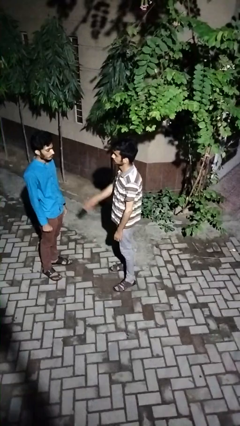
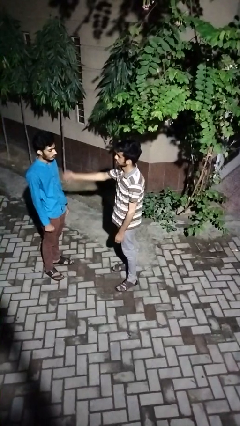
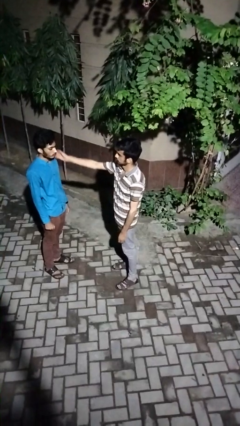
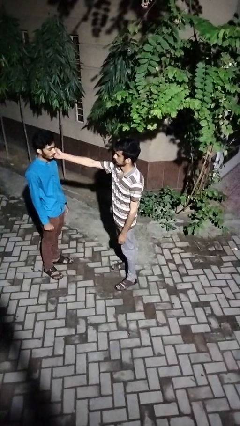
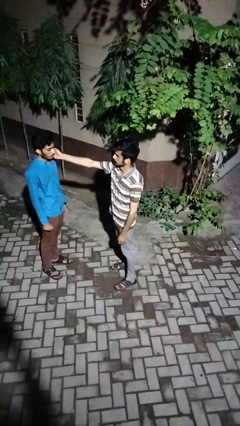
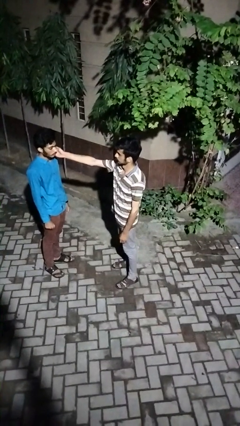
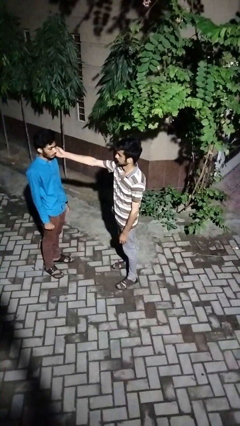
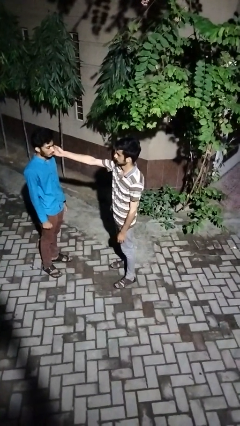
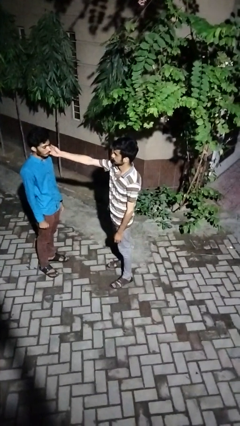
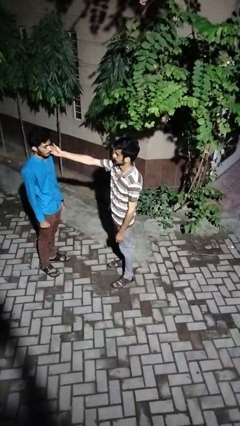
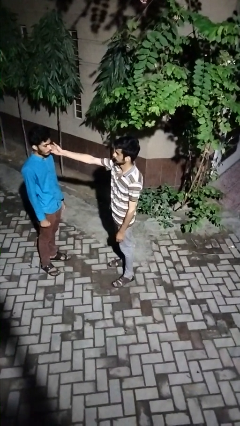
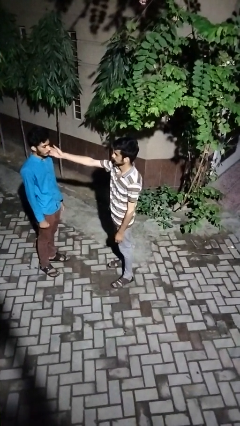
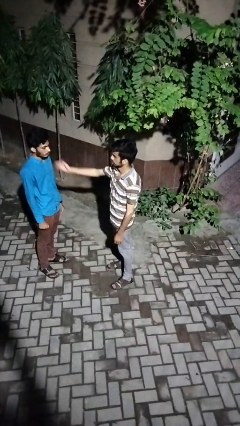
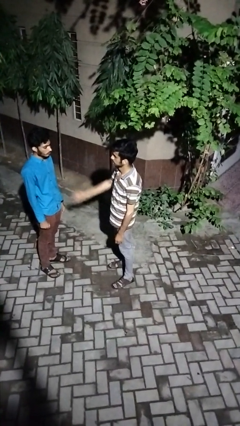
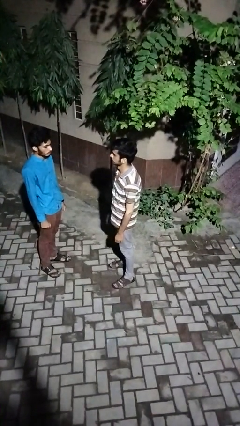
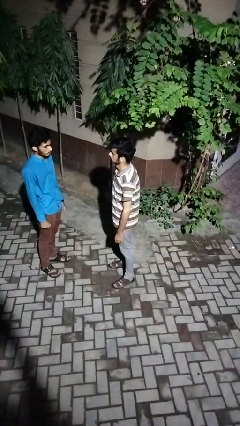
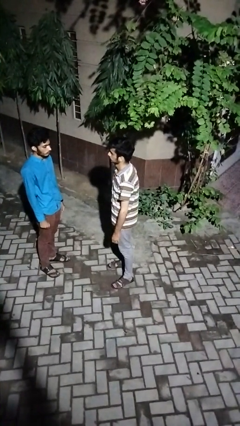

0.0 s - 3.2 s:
person touches face of person

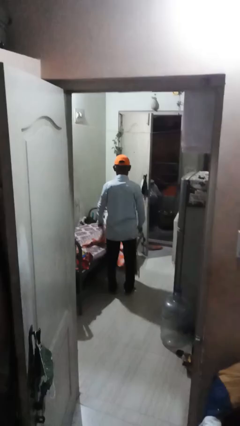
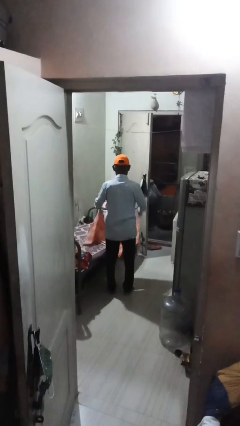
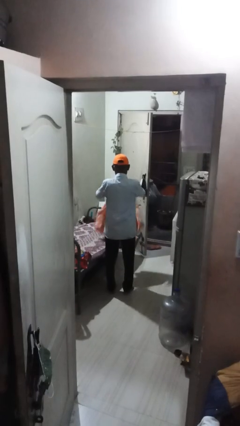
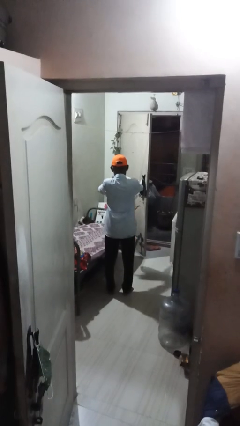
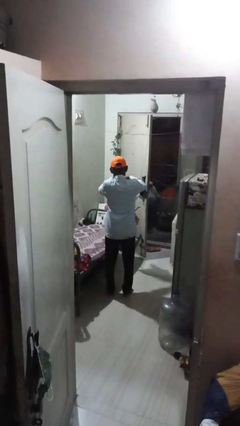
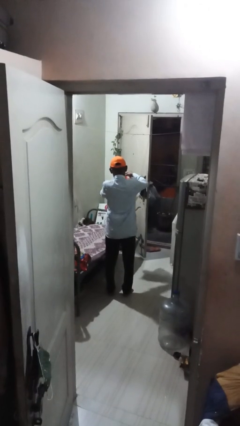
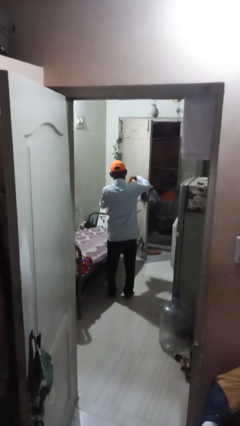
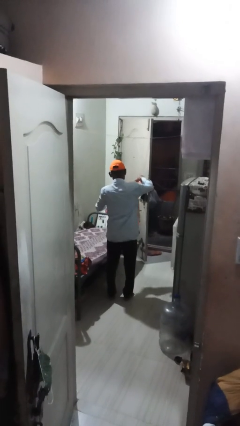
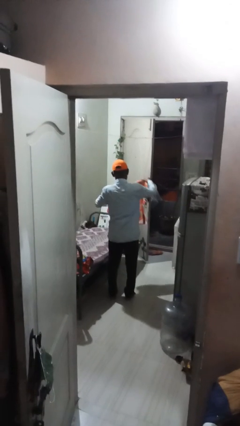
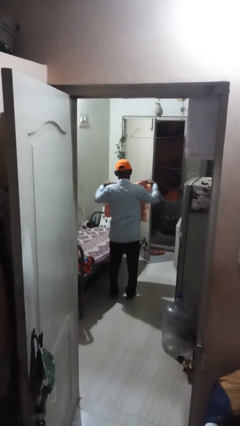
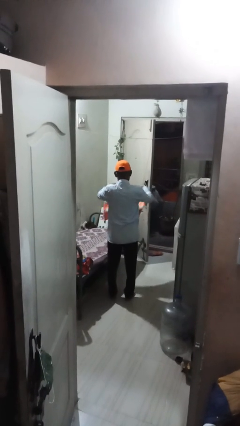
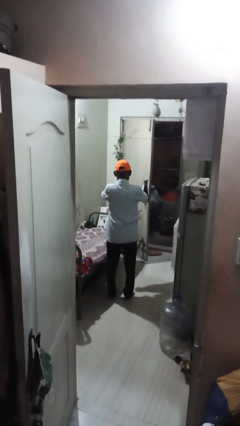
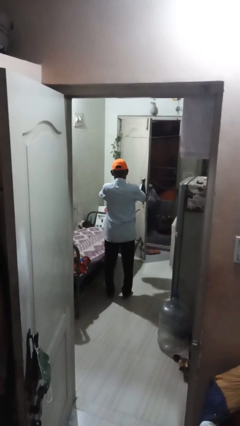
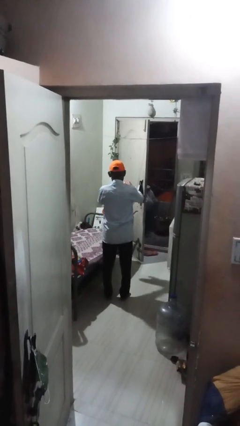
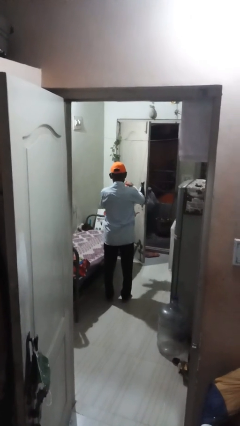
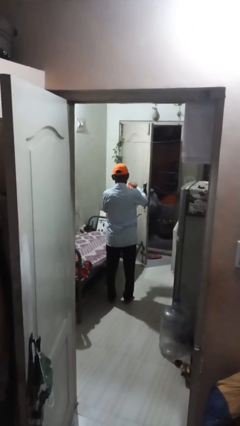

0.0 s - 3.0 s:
person folds towel

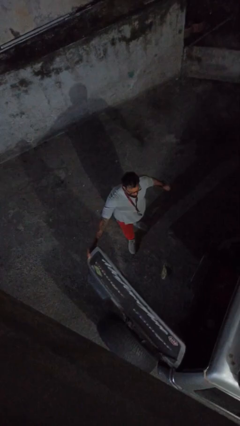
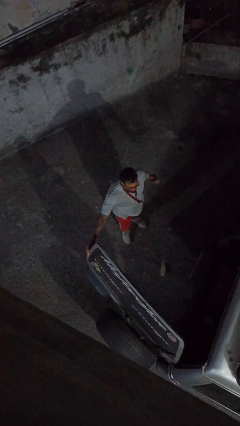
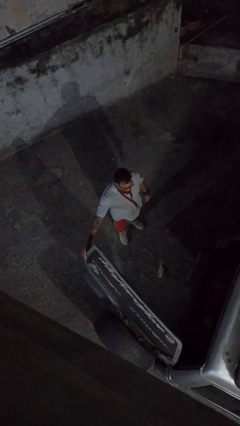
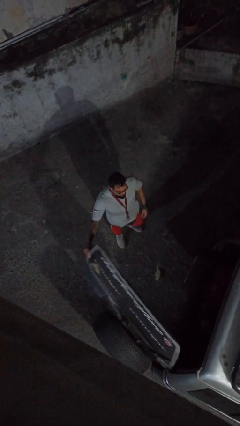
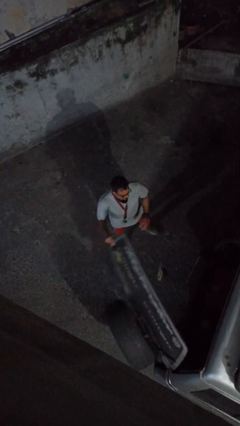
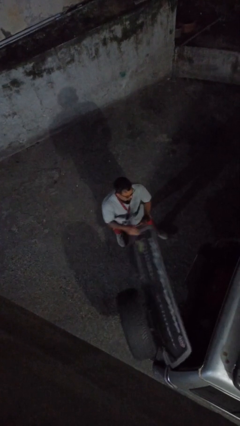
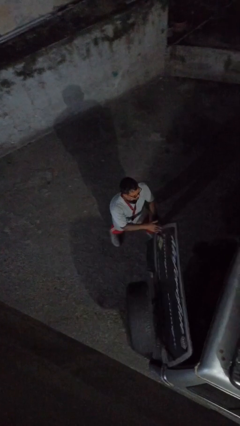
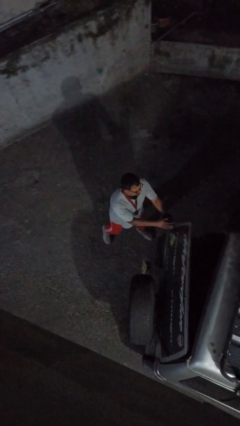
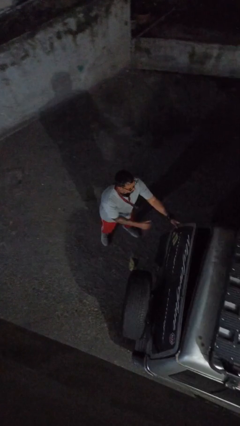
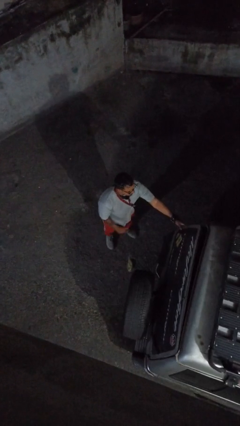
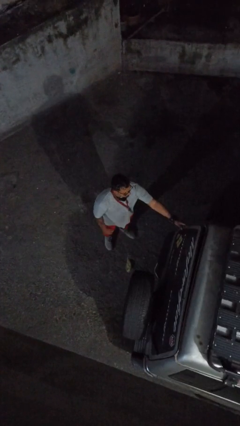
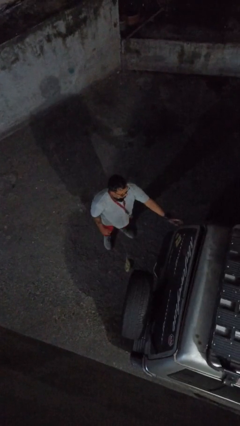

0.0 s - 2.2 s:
person closes car trunk

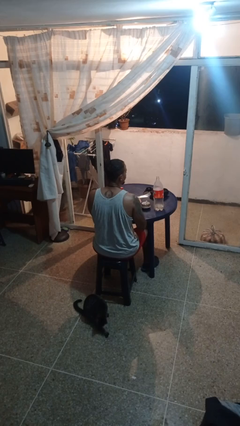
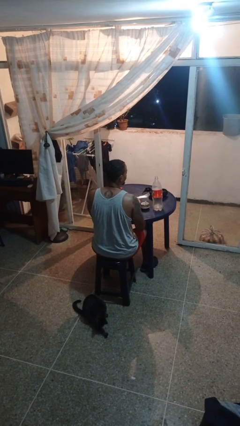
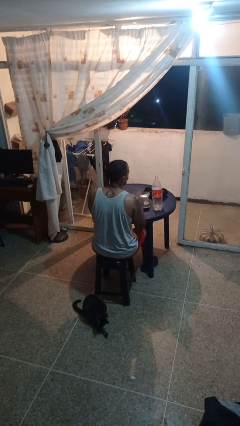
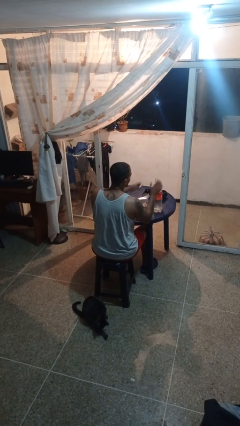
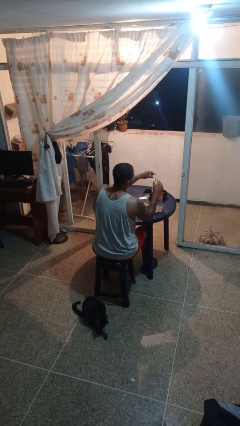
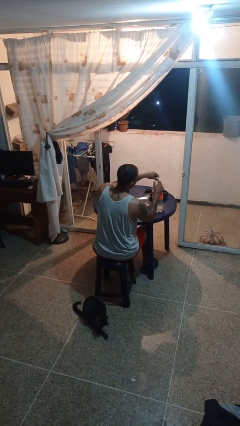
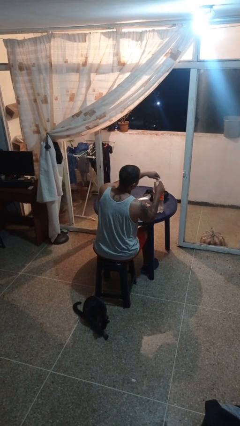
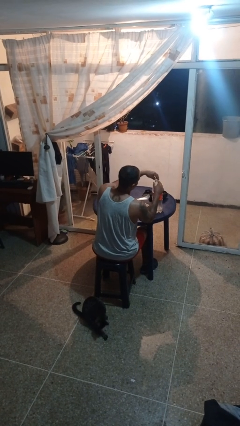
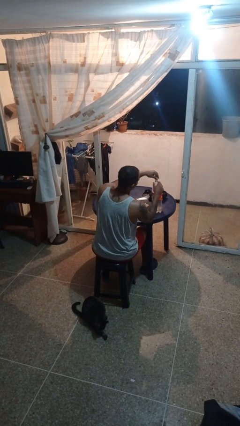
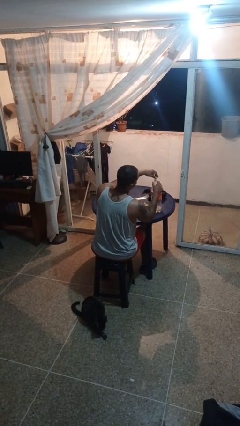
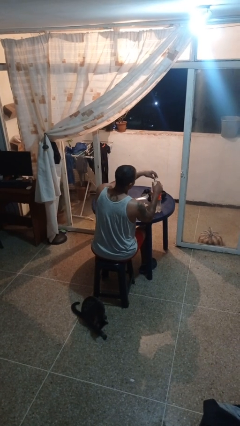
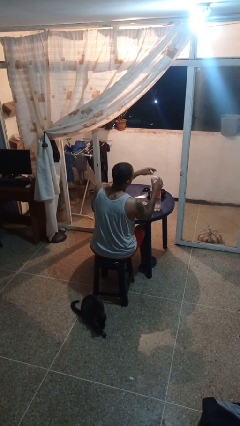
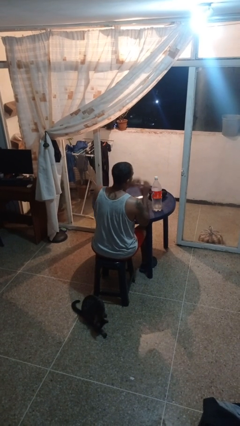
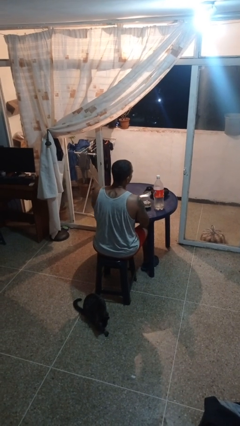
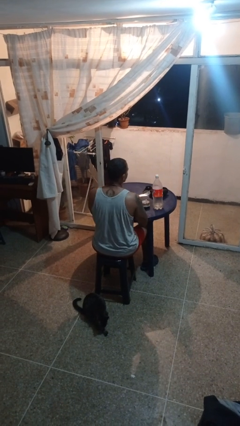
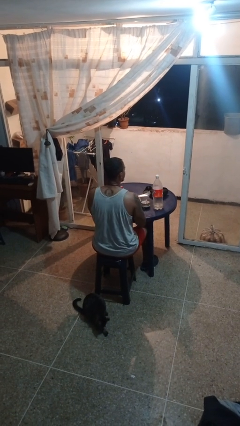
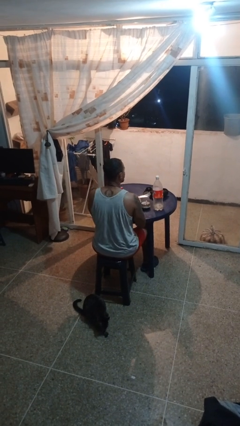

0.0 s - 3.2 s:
person screws lid to bottle

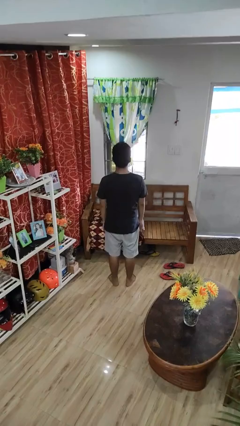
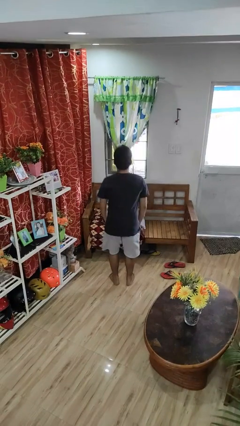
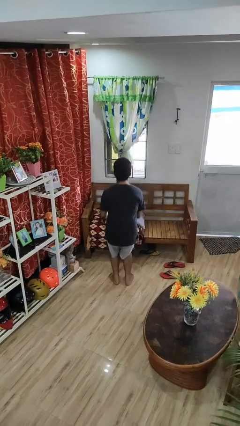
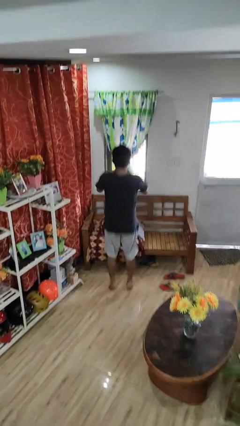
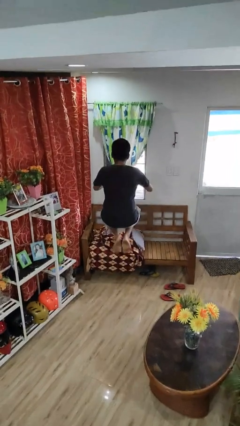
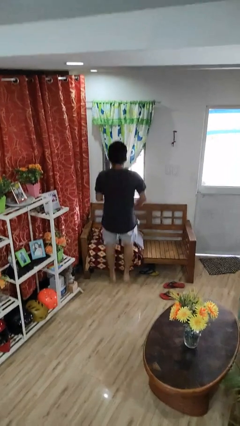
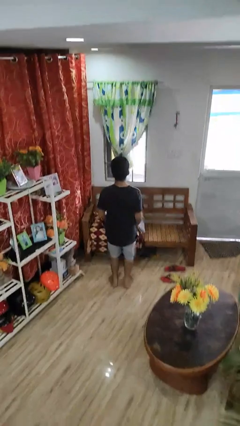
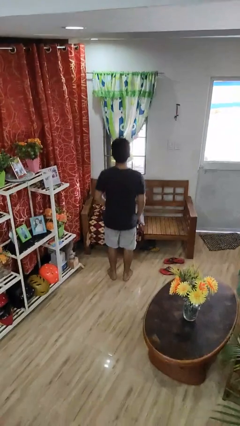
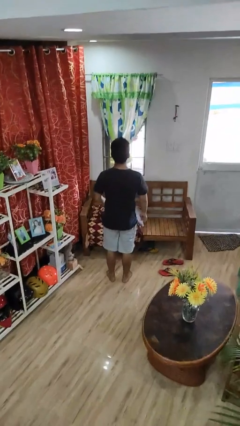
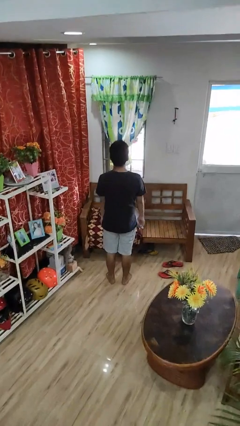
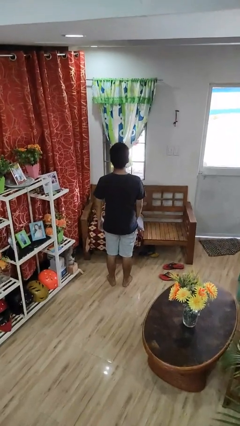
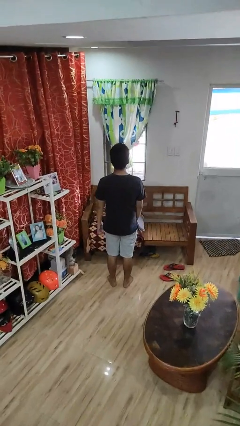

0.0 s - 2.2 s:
person jumps

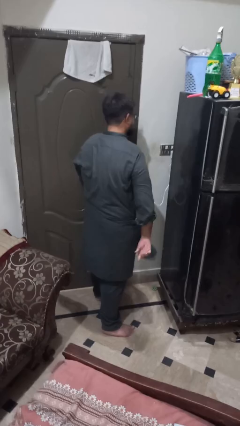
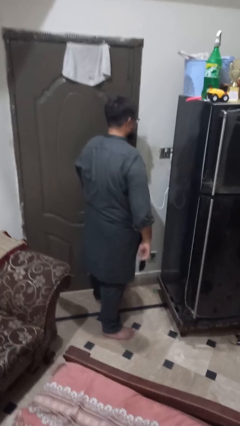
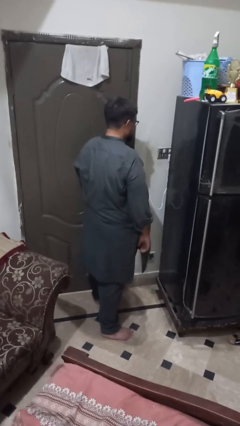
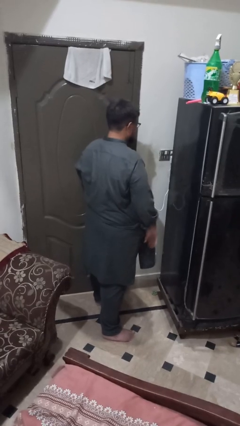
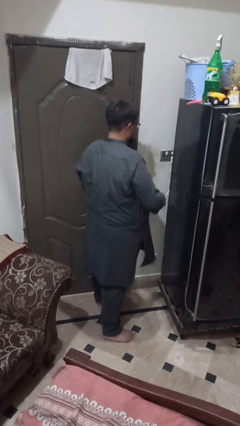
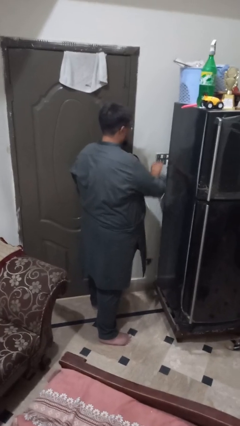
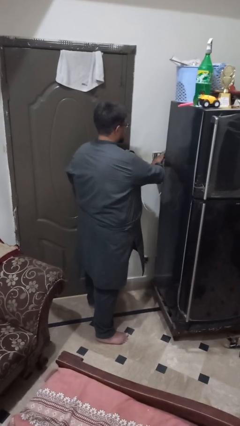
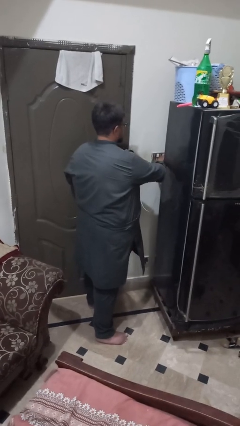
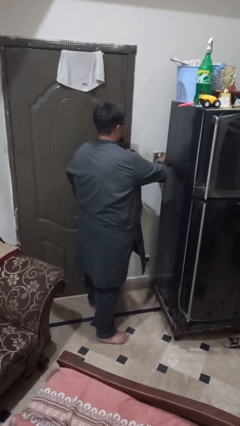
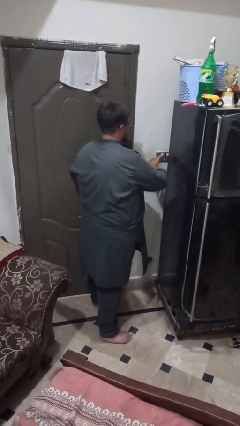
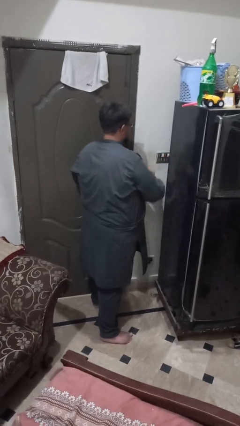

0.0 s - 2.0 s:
person unplugs from electrical socket

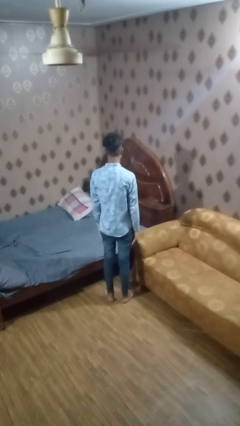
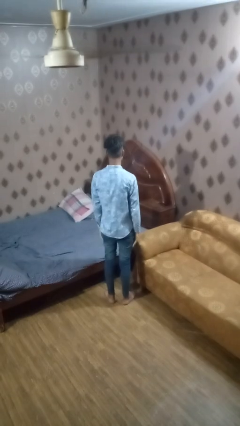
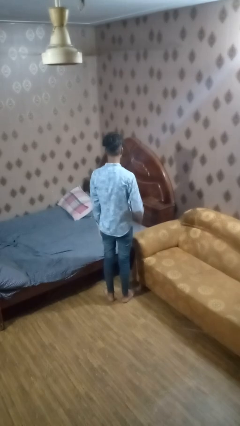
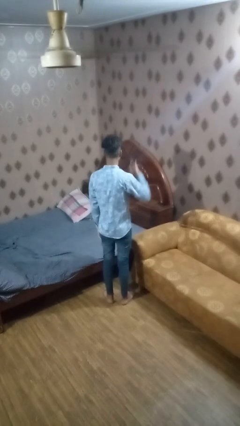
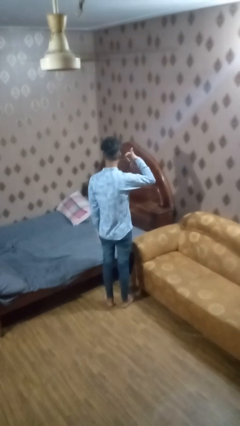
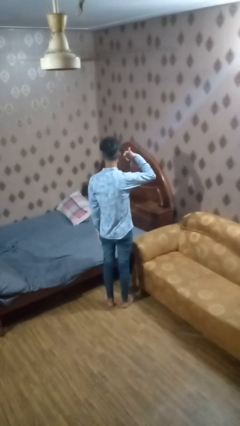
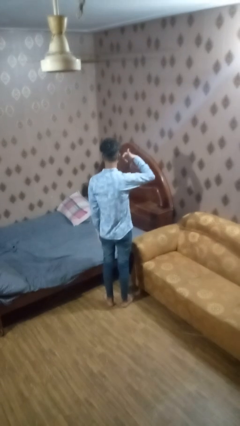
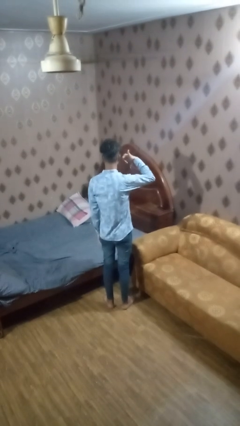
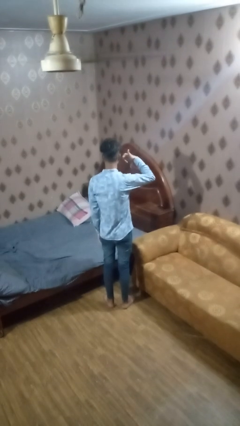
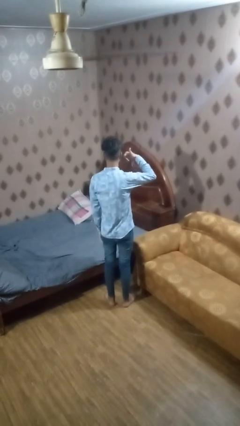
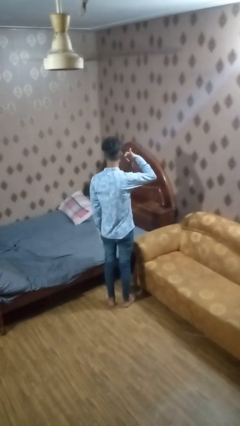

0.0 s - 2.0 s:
person gestures call me
